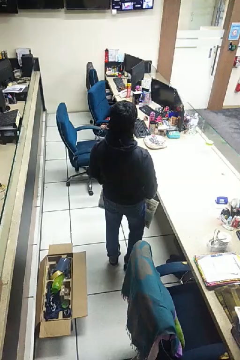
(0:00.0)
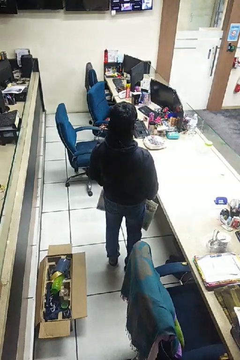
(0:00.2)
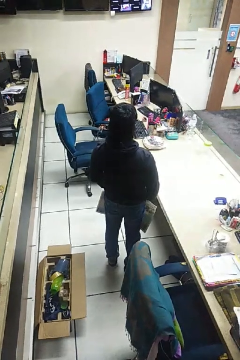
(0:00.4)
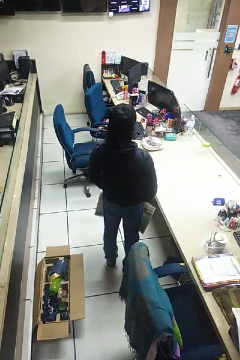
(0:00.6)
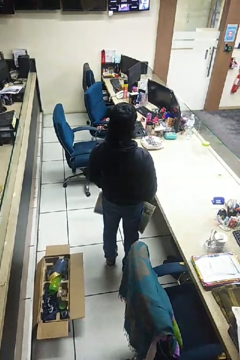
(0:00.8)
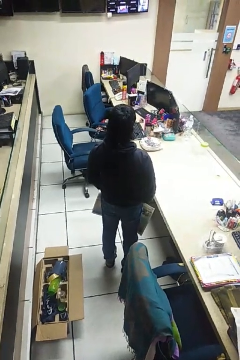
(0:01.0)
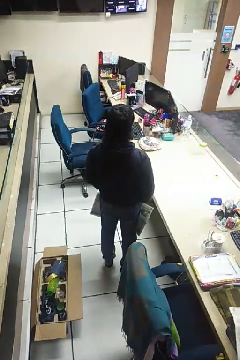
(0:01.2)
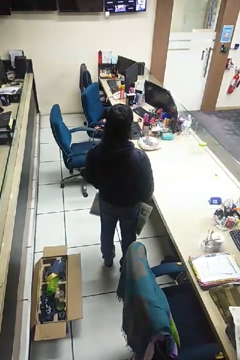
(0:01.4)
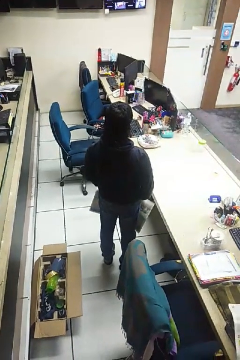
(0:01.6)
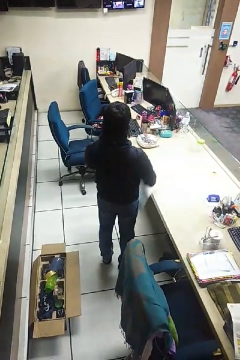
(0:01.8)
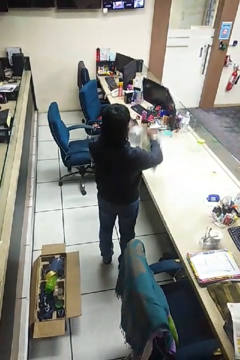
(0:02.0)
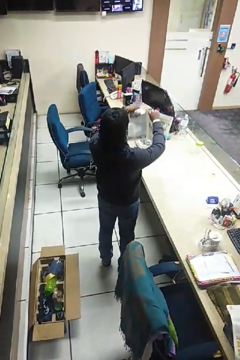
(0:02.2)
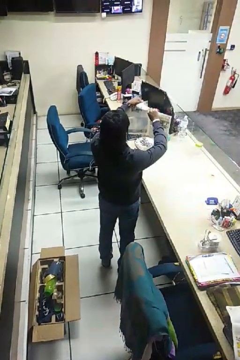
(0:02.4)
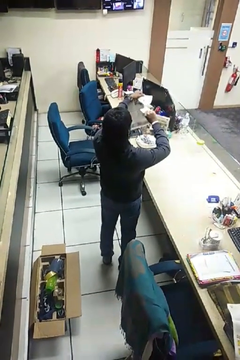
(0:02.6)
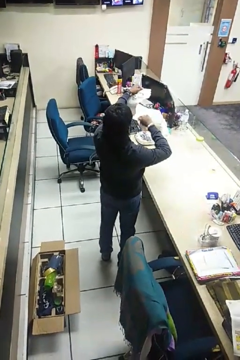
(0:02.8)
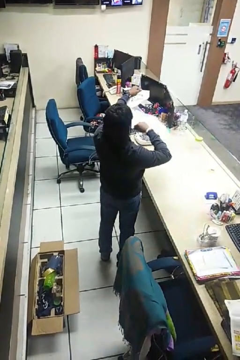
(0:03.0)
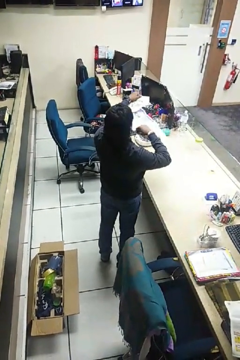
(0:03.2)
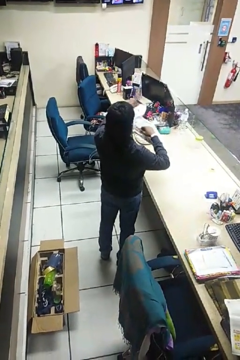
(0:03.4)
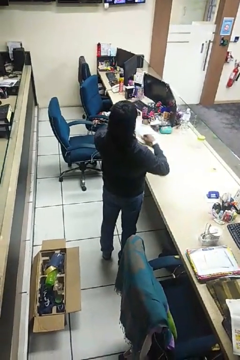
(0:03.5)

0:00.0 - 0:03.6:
person tears paper

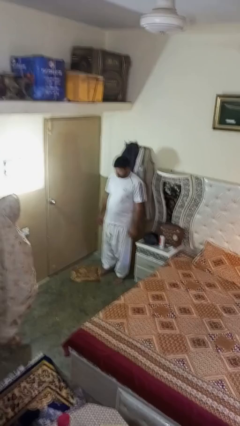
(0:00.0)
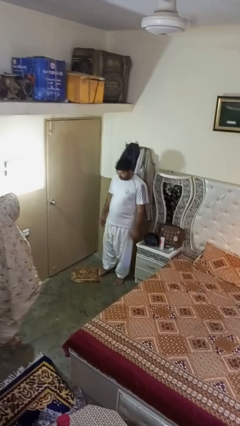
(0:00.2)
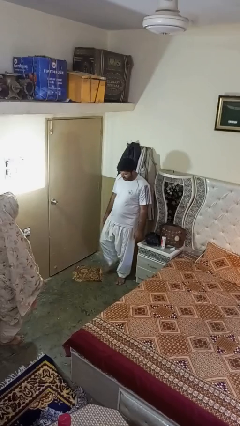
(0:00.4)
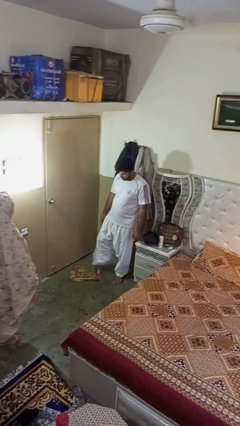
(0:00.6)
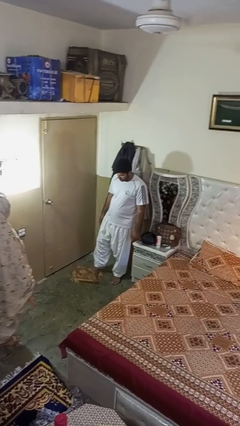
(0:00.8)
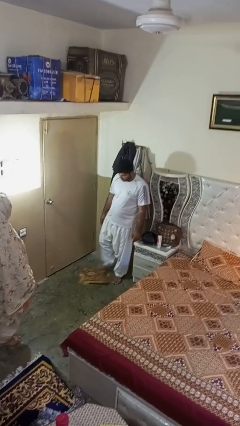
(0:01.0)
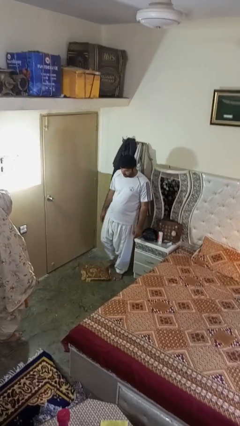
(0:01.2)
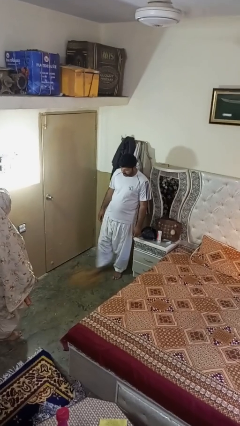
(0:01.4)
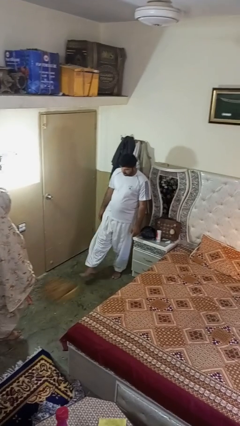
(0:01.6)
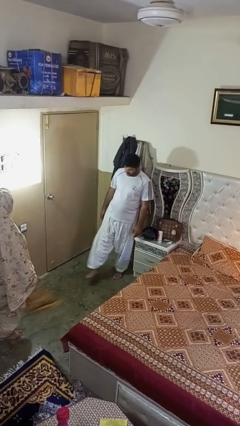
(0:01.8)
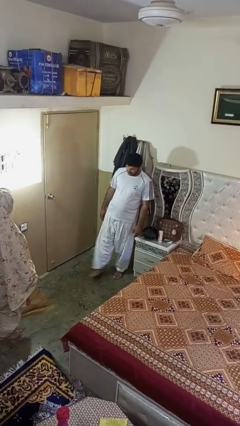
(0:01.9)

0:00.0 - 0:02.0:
person kicks object to person

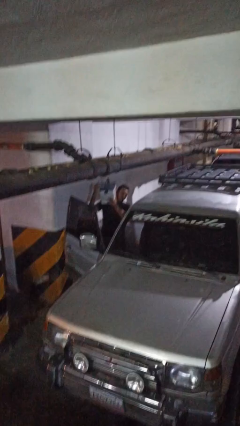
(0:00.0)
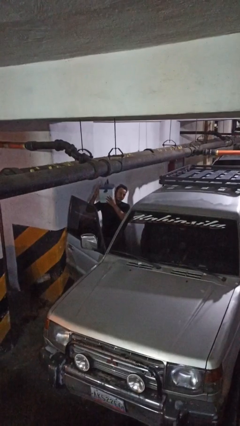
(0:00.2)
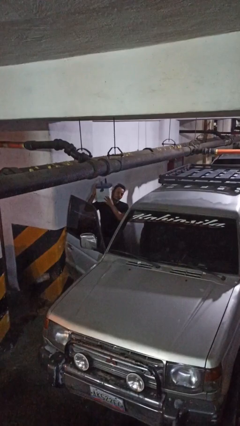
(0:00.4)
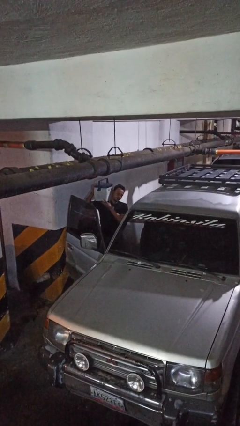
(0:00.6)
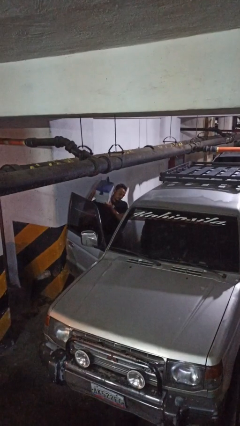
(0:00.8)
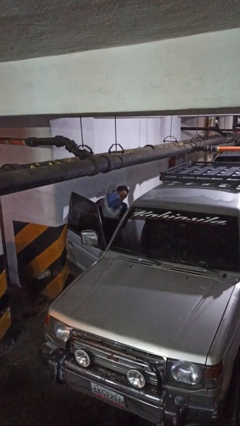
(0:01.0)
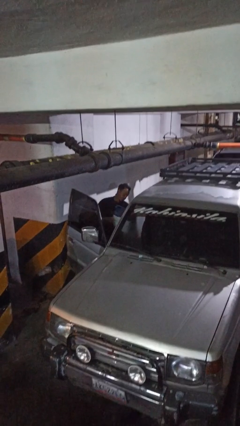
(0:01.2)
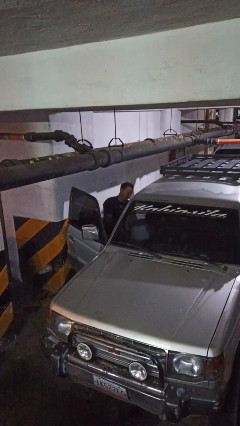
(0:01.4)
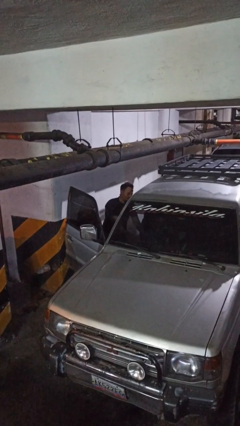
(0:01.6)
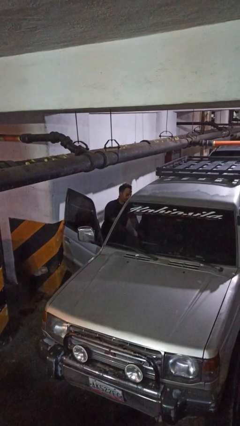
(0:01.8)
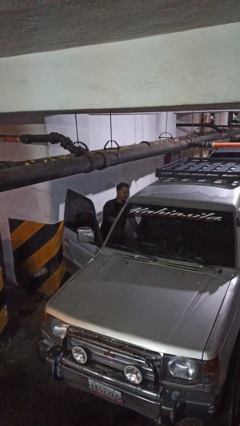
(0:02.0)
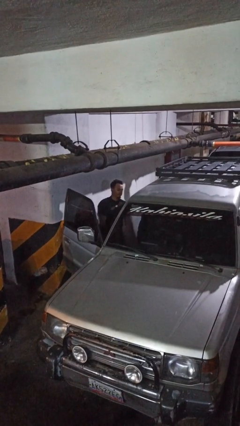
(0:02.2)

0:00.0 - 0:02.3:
person loads car

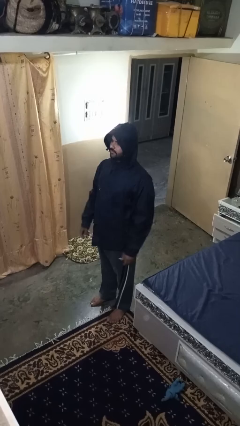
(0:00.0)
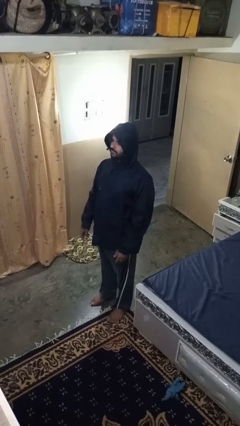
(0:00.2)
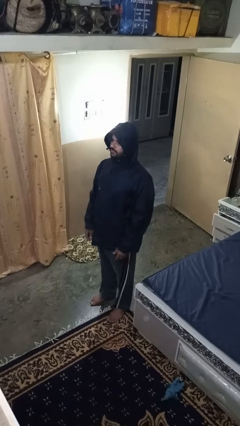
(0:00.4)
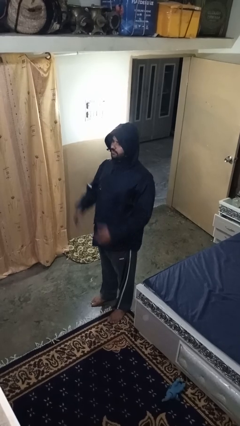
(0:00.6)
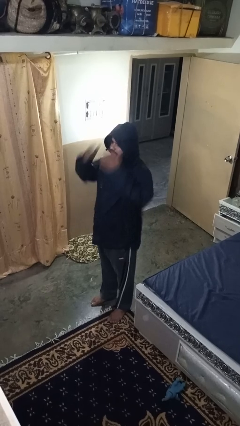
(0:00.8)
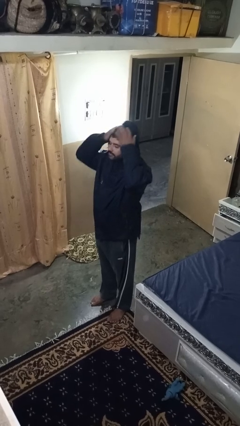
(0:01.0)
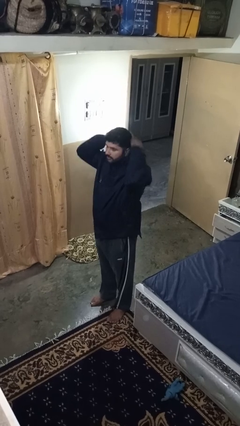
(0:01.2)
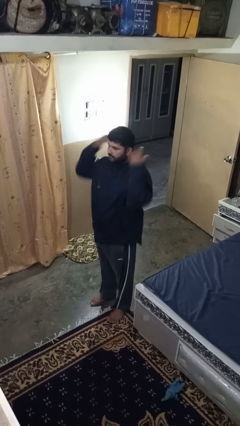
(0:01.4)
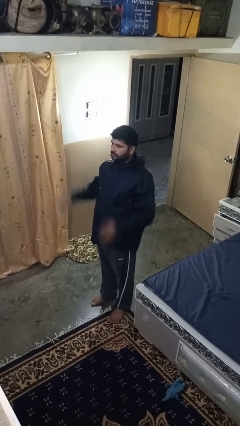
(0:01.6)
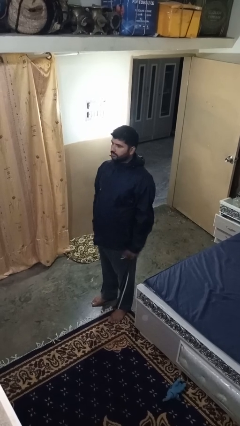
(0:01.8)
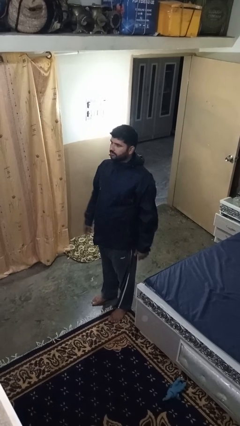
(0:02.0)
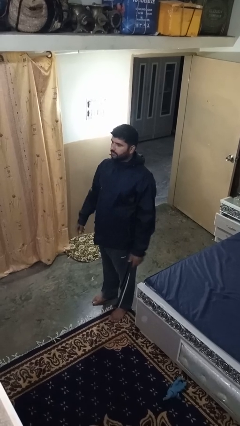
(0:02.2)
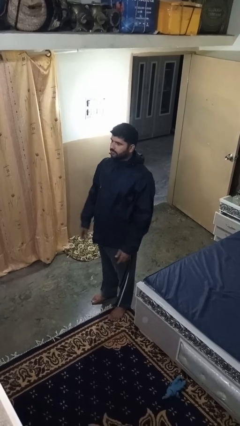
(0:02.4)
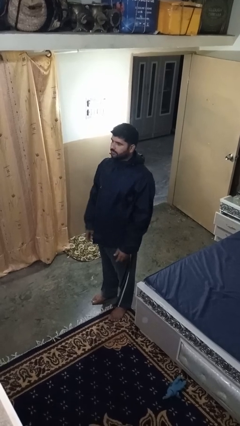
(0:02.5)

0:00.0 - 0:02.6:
person takes off hoodie

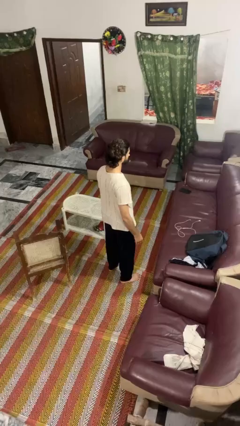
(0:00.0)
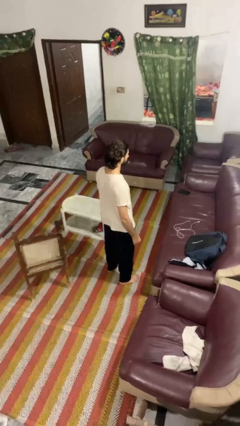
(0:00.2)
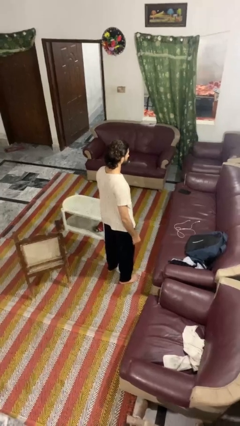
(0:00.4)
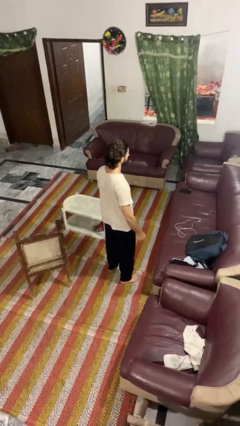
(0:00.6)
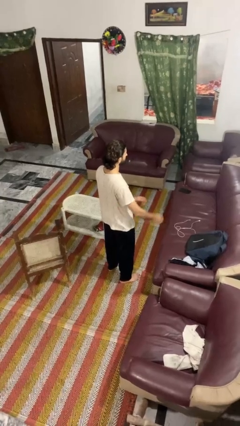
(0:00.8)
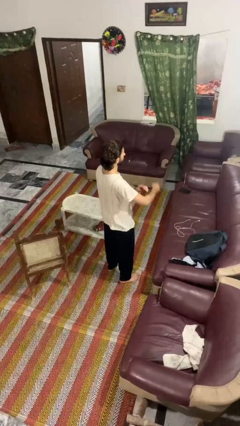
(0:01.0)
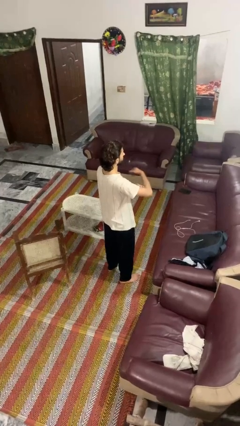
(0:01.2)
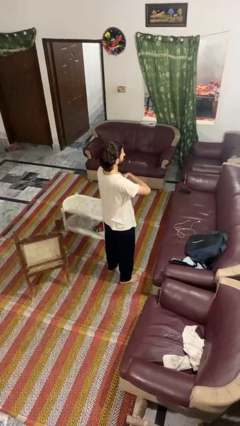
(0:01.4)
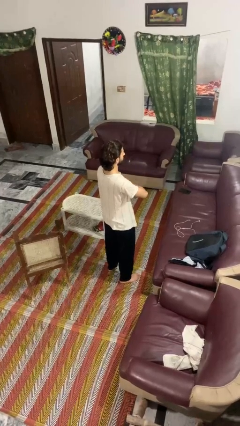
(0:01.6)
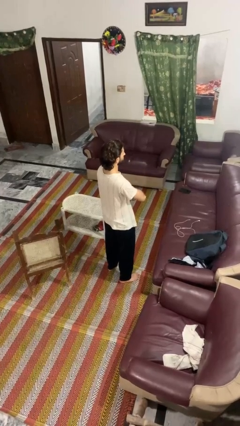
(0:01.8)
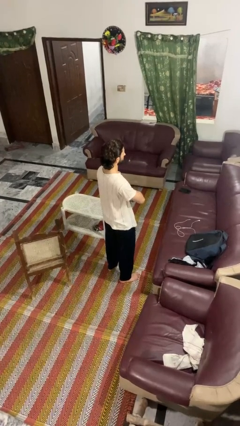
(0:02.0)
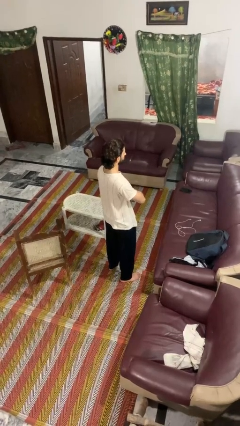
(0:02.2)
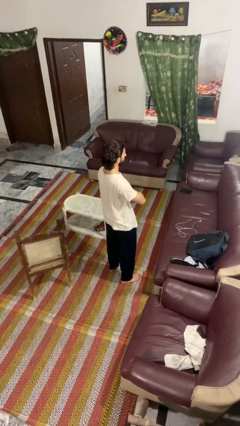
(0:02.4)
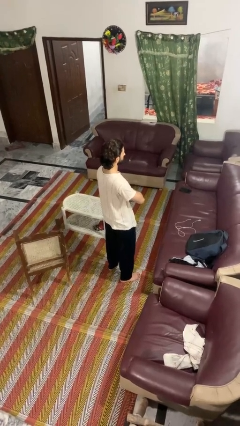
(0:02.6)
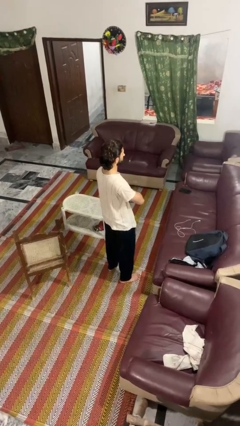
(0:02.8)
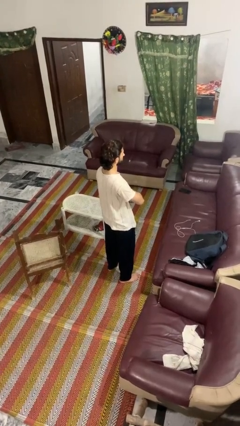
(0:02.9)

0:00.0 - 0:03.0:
person crosses arms

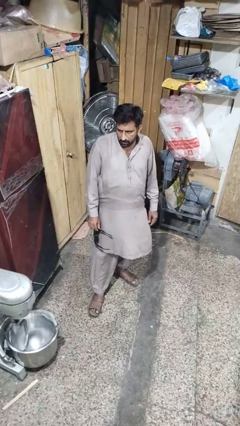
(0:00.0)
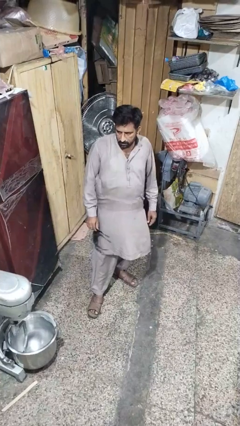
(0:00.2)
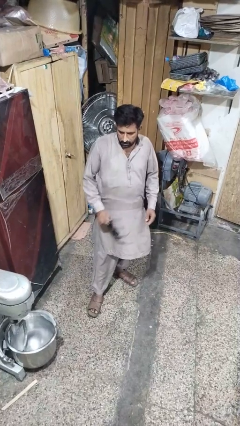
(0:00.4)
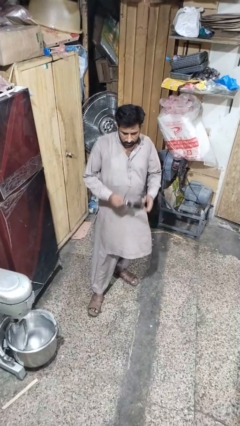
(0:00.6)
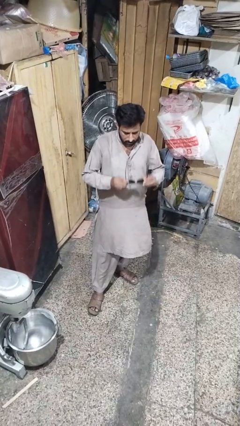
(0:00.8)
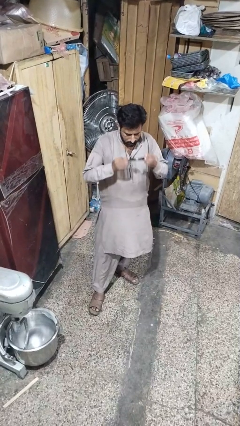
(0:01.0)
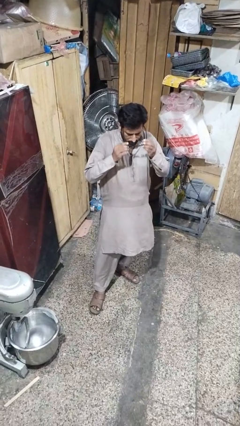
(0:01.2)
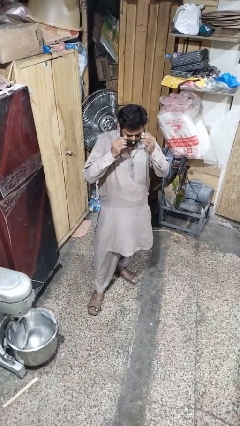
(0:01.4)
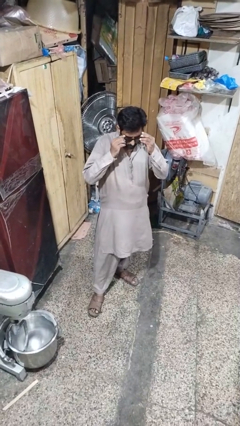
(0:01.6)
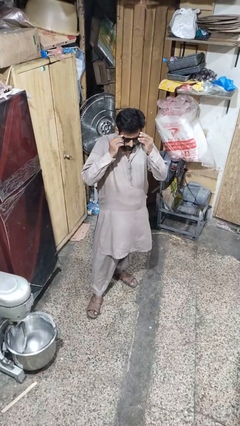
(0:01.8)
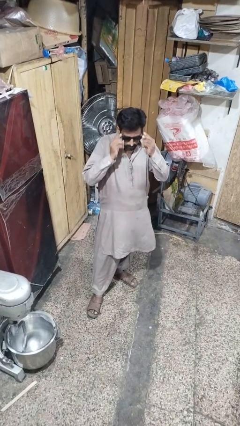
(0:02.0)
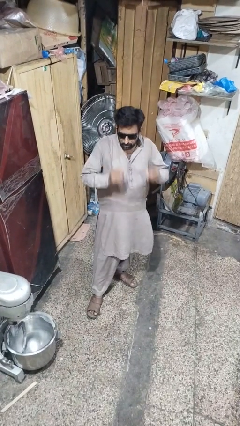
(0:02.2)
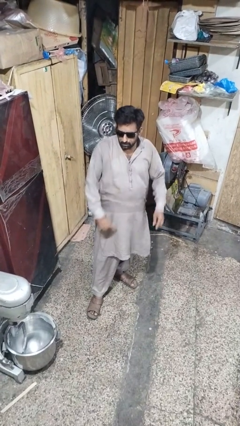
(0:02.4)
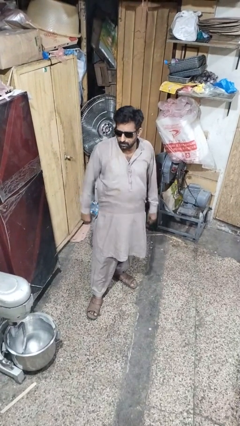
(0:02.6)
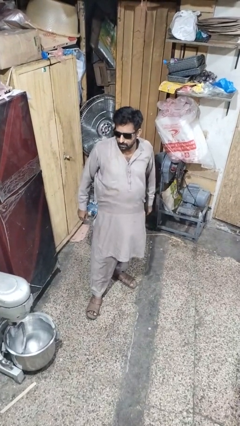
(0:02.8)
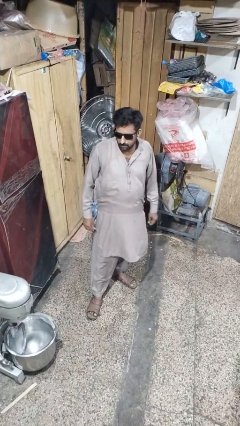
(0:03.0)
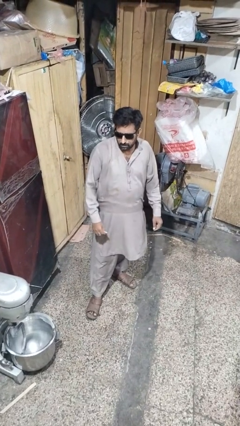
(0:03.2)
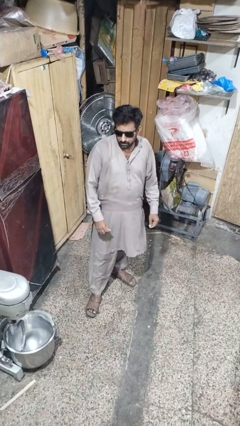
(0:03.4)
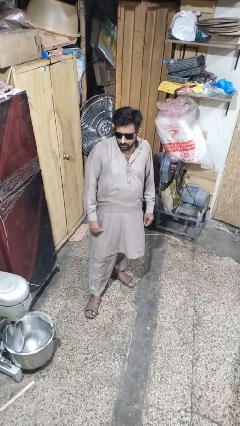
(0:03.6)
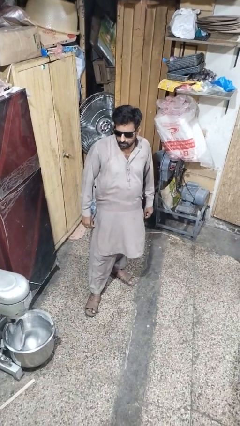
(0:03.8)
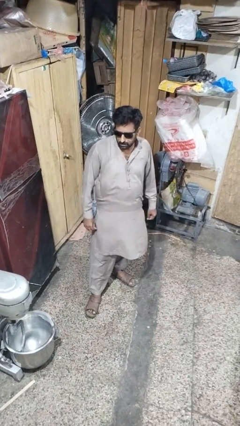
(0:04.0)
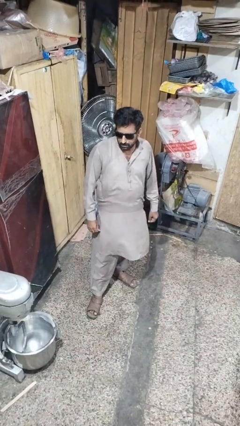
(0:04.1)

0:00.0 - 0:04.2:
person puts on sunglasses

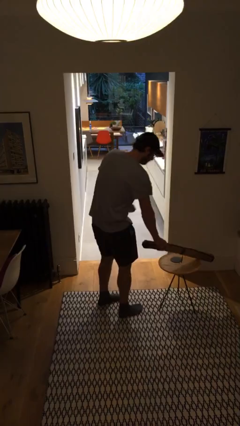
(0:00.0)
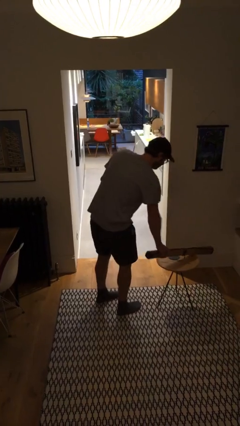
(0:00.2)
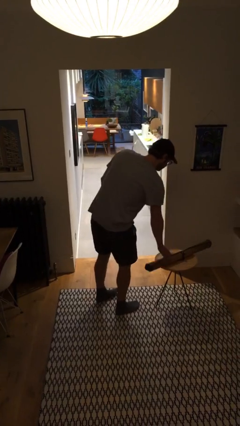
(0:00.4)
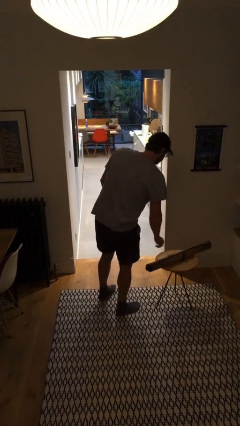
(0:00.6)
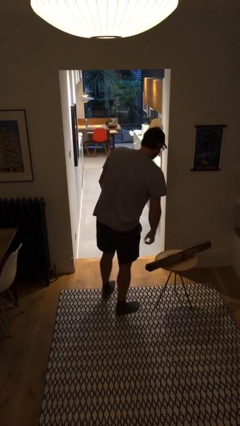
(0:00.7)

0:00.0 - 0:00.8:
person puts down object on table
